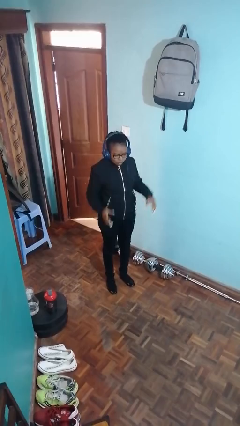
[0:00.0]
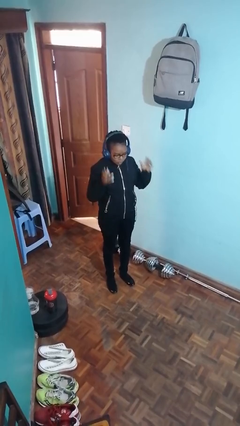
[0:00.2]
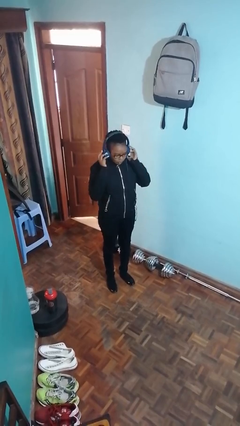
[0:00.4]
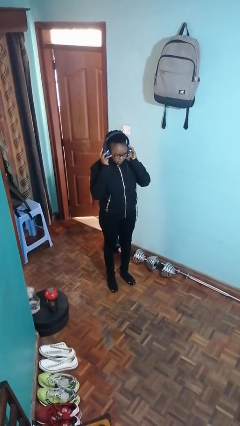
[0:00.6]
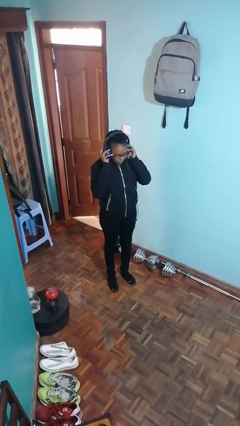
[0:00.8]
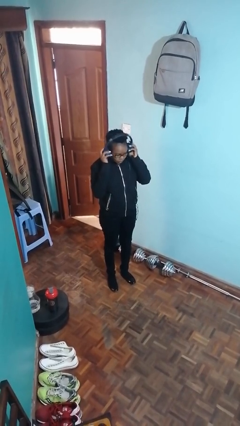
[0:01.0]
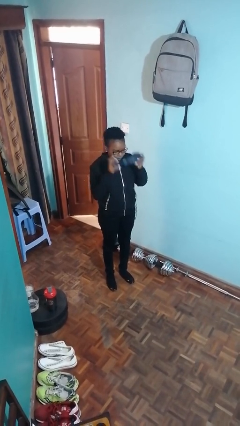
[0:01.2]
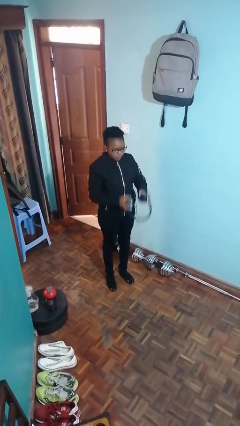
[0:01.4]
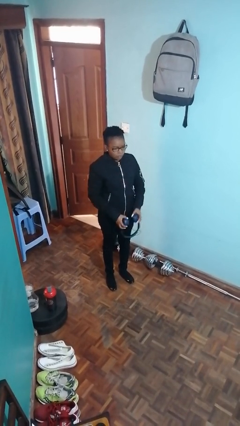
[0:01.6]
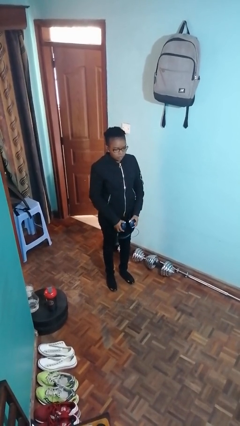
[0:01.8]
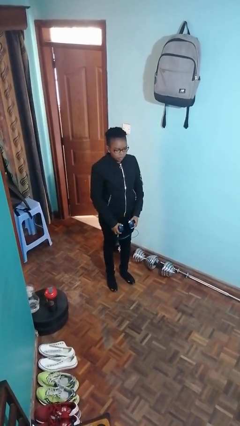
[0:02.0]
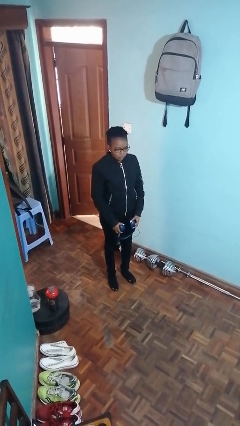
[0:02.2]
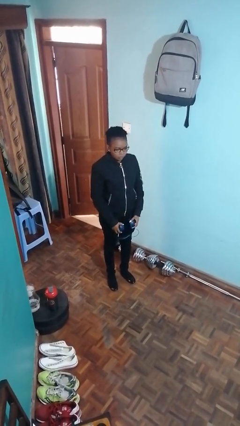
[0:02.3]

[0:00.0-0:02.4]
person takes off headphones

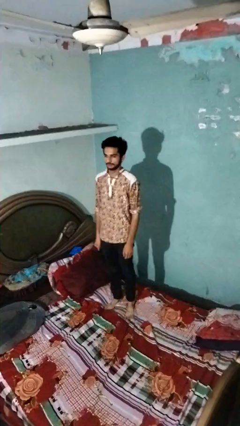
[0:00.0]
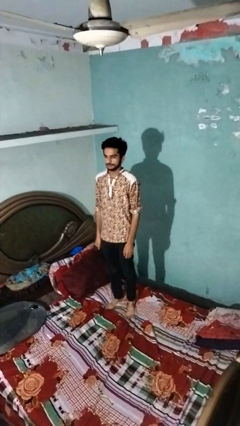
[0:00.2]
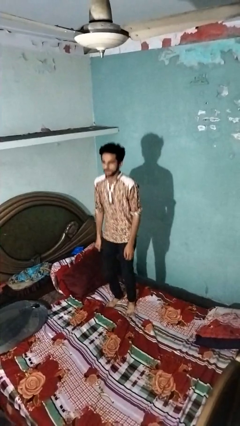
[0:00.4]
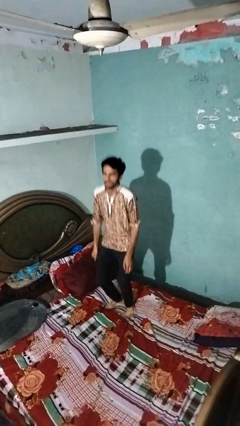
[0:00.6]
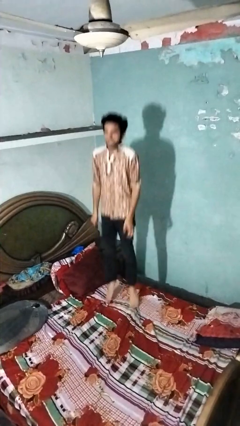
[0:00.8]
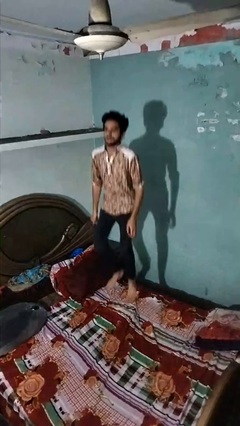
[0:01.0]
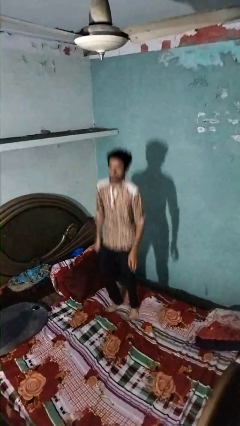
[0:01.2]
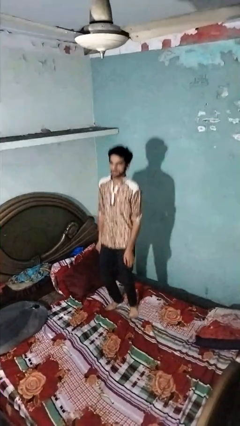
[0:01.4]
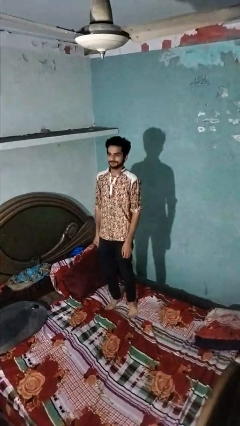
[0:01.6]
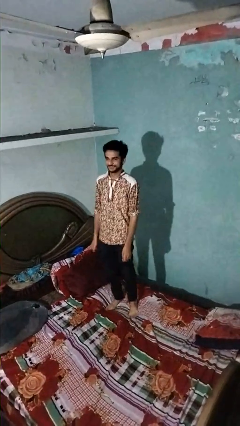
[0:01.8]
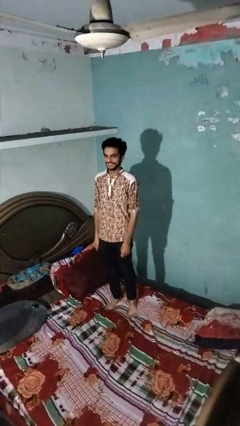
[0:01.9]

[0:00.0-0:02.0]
person jumps on bed

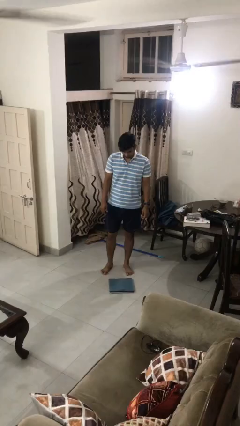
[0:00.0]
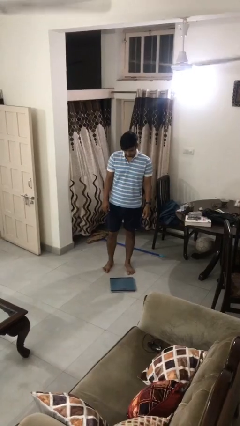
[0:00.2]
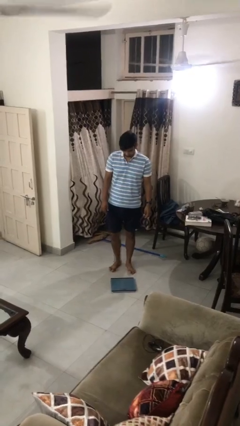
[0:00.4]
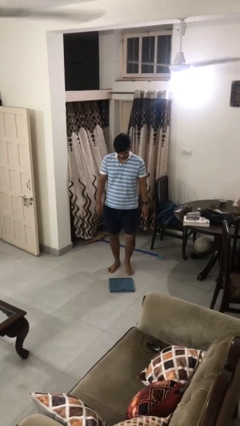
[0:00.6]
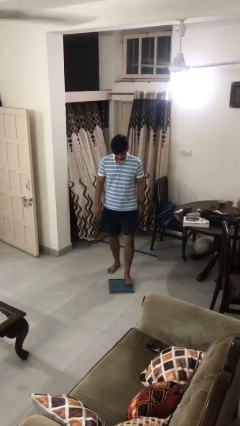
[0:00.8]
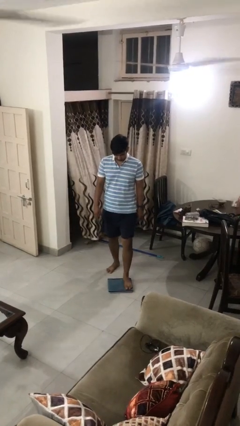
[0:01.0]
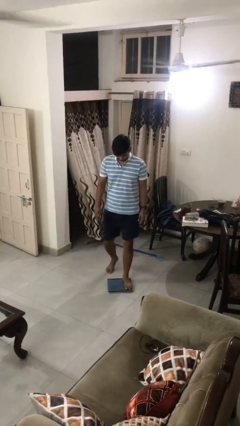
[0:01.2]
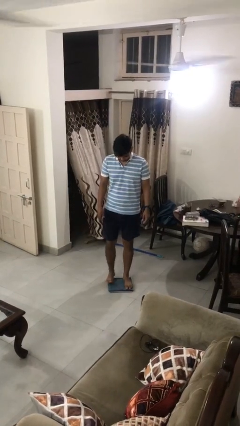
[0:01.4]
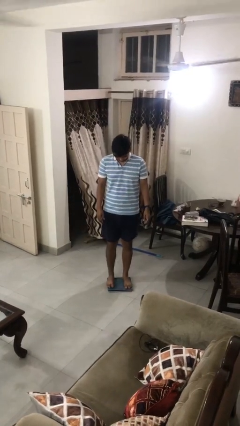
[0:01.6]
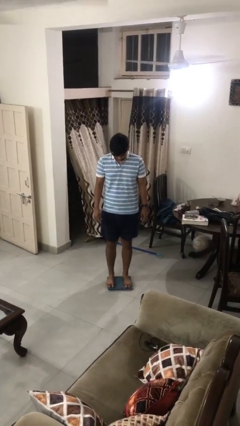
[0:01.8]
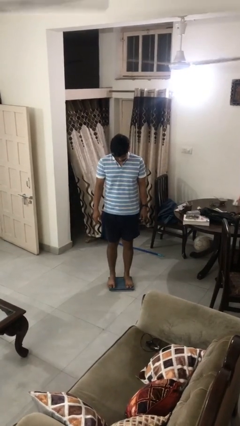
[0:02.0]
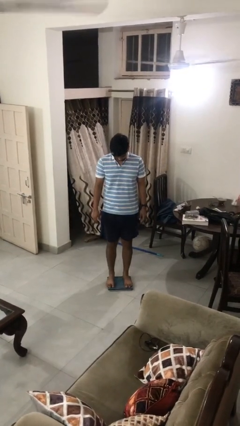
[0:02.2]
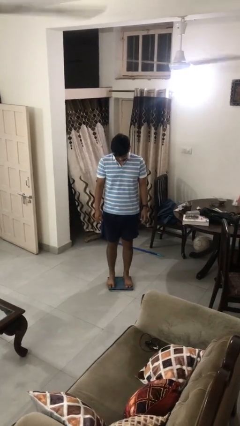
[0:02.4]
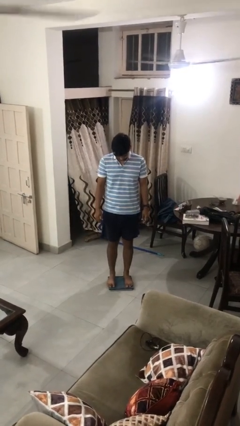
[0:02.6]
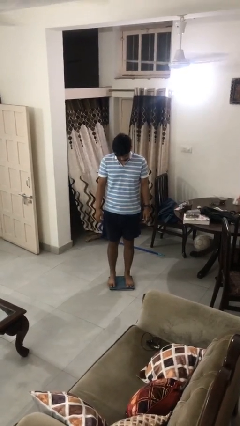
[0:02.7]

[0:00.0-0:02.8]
person uses bodyweight scale

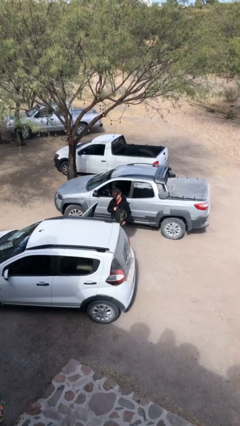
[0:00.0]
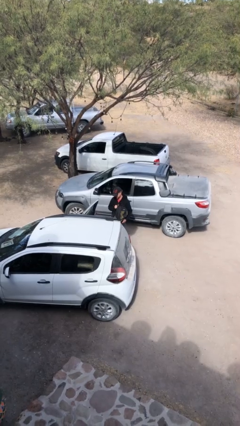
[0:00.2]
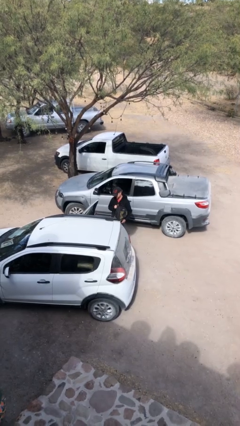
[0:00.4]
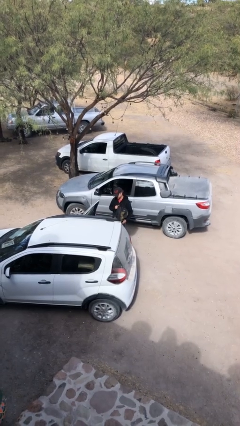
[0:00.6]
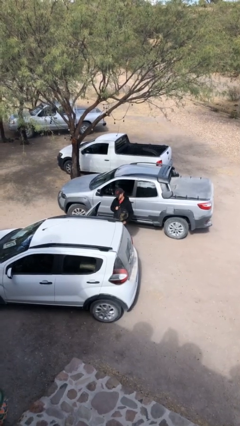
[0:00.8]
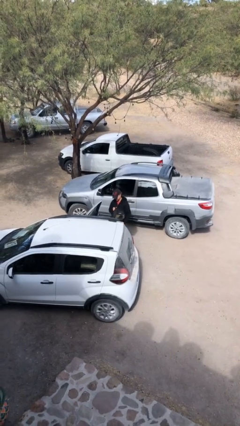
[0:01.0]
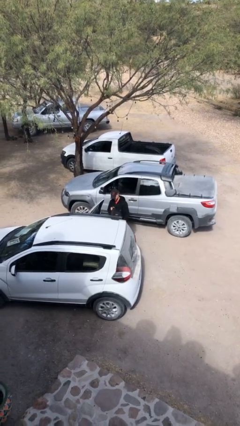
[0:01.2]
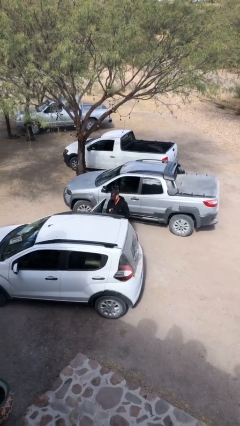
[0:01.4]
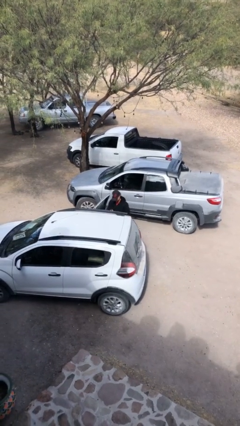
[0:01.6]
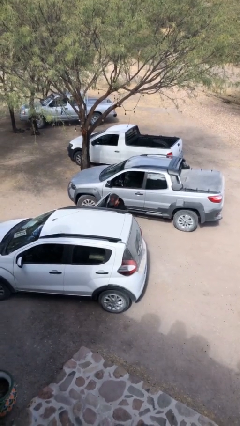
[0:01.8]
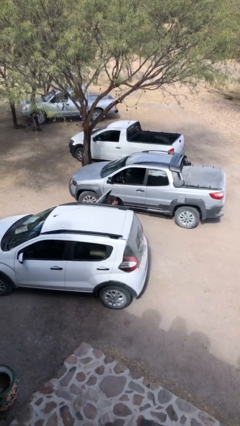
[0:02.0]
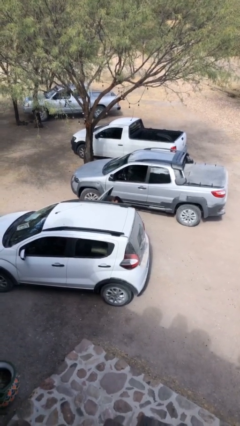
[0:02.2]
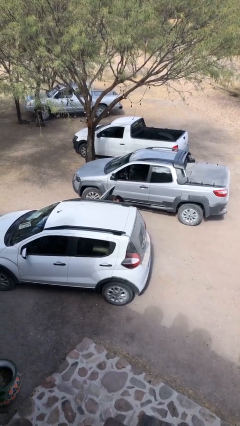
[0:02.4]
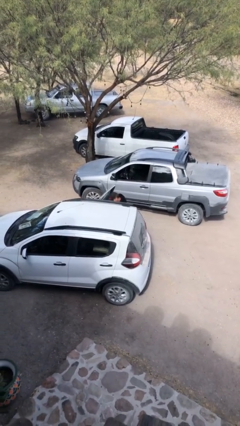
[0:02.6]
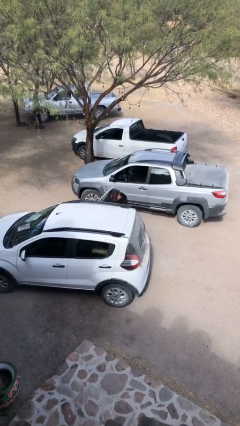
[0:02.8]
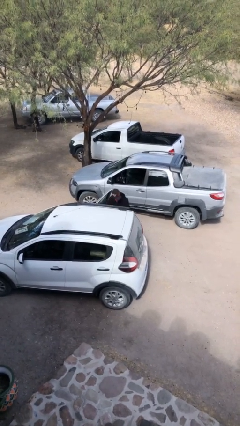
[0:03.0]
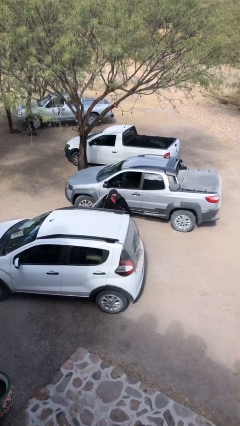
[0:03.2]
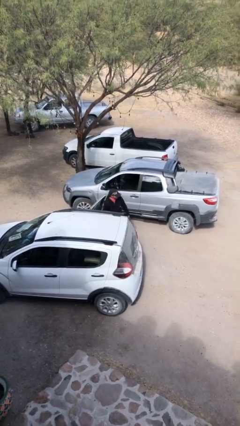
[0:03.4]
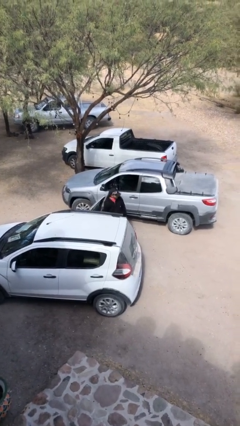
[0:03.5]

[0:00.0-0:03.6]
person loads car

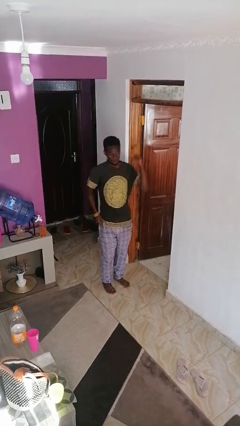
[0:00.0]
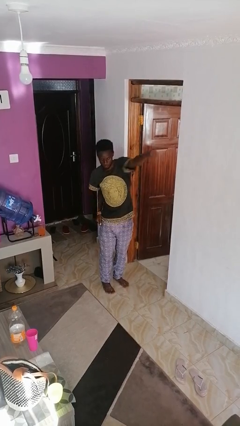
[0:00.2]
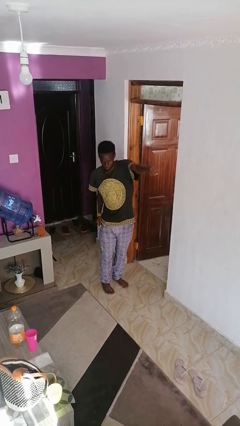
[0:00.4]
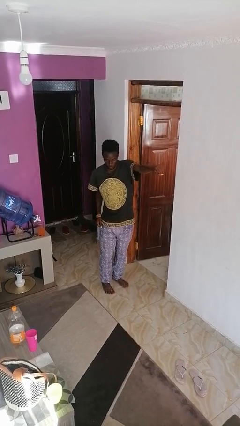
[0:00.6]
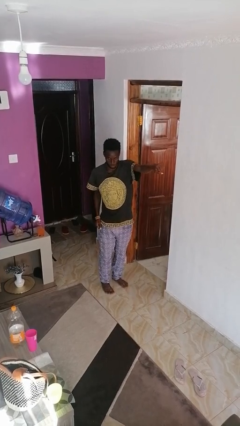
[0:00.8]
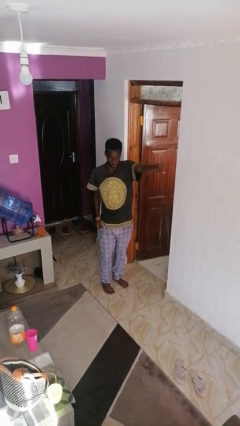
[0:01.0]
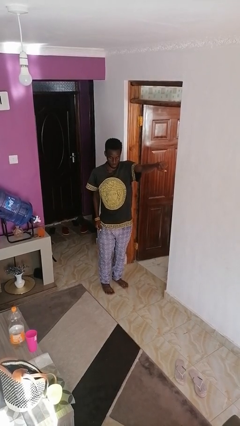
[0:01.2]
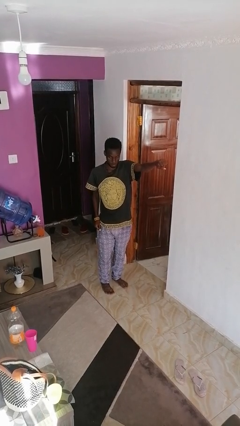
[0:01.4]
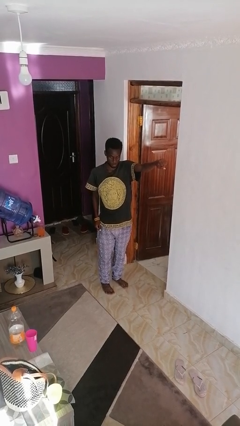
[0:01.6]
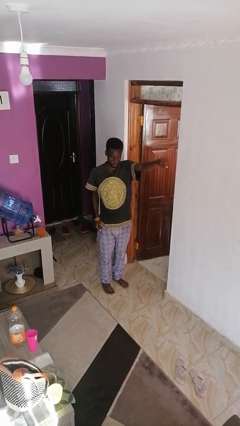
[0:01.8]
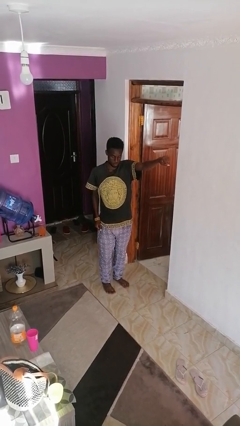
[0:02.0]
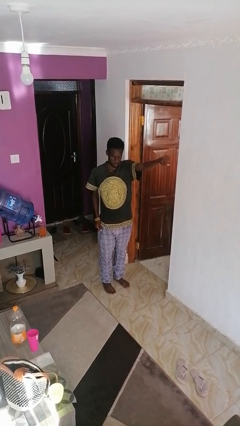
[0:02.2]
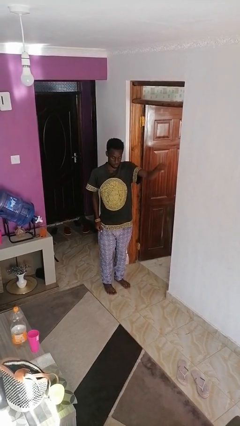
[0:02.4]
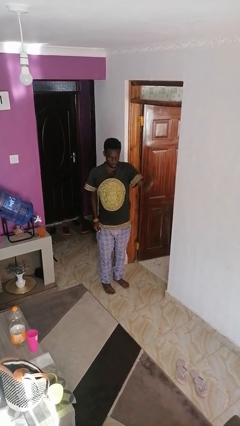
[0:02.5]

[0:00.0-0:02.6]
person punches

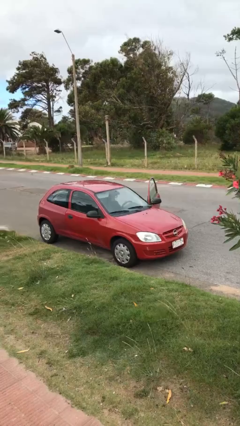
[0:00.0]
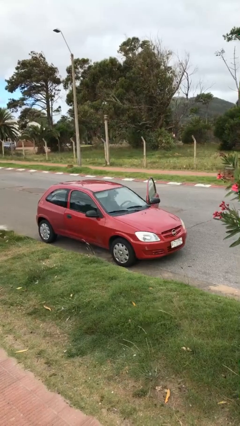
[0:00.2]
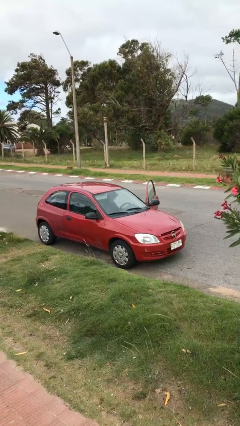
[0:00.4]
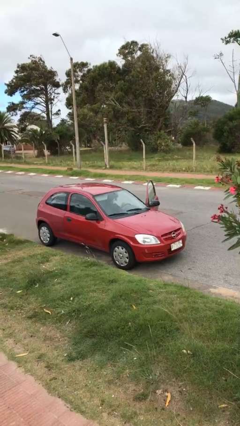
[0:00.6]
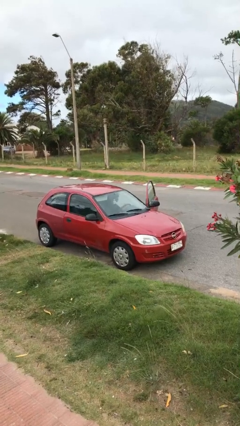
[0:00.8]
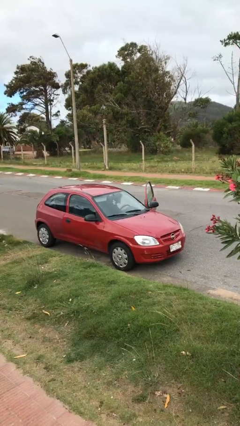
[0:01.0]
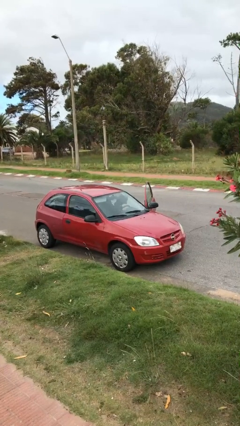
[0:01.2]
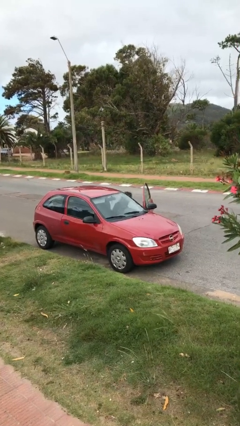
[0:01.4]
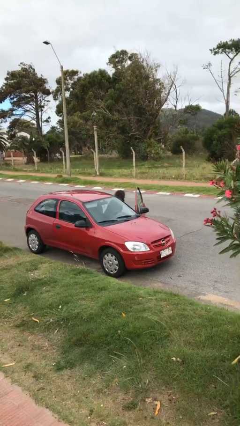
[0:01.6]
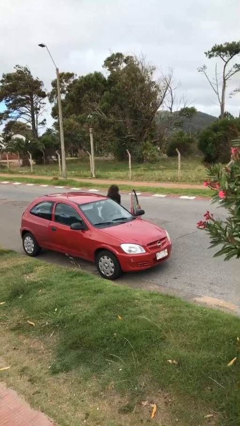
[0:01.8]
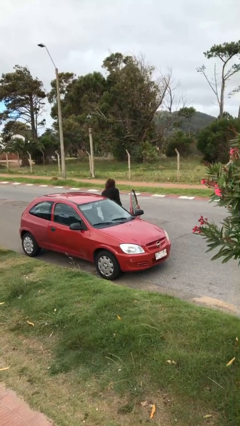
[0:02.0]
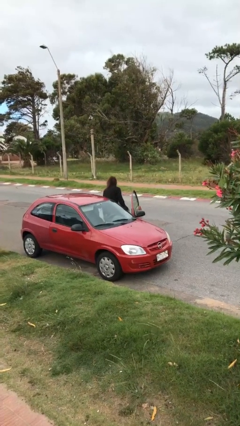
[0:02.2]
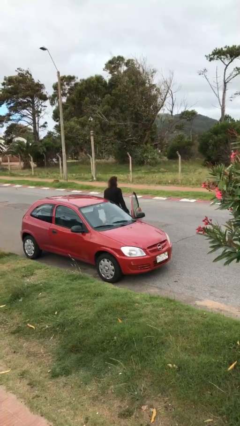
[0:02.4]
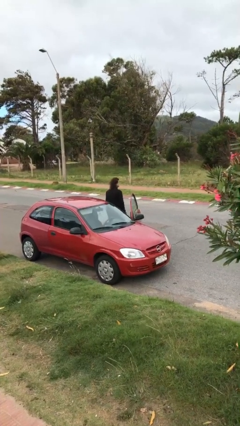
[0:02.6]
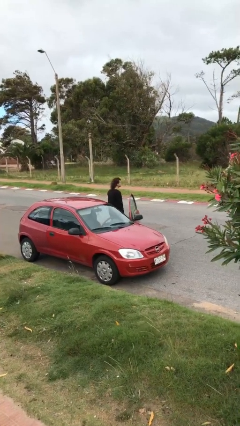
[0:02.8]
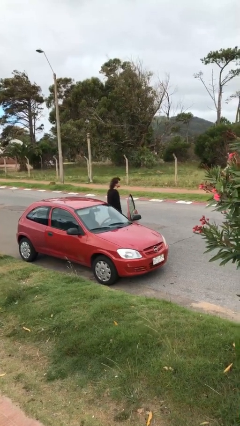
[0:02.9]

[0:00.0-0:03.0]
person exits car

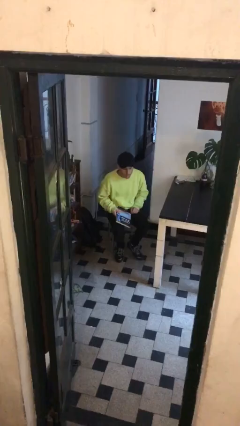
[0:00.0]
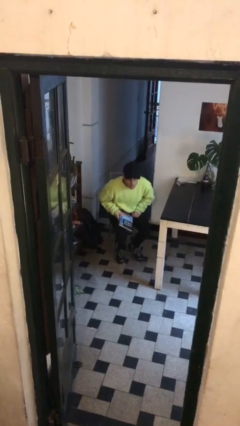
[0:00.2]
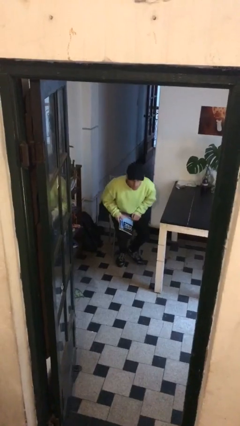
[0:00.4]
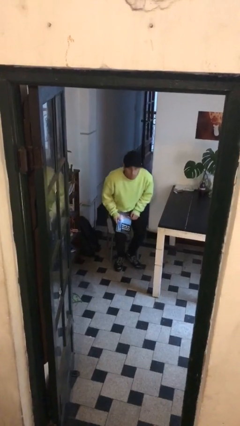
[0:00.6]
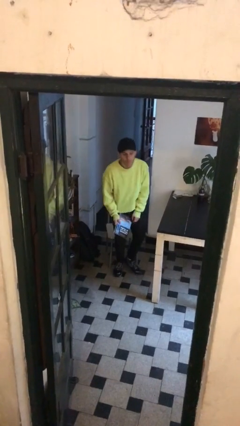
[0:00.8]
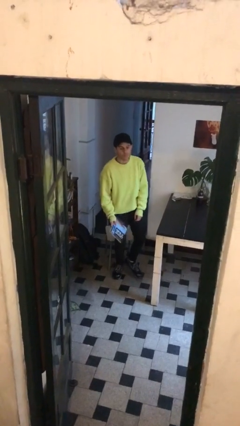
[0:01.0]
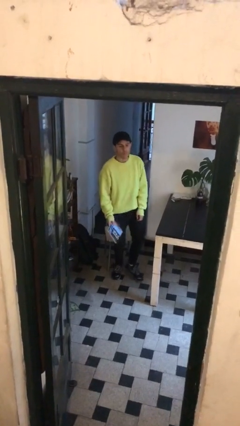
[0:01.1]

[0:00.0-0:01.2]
person stands up
